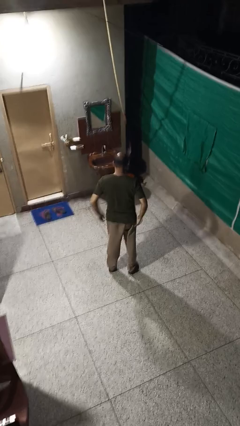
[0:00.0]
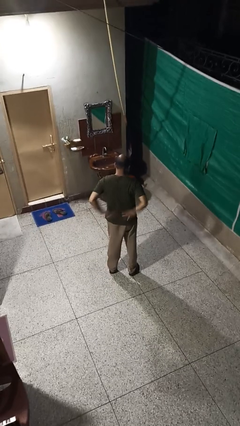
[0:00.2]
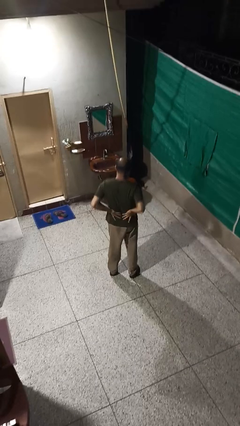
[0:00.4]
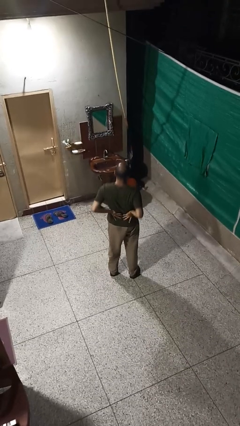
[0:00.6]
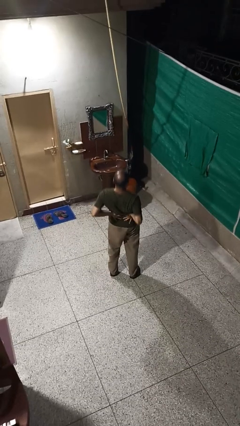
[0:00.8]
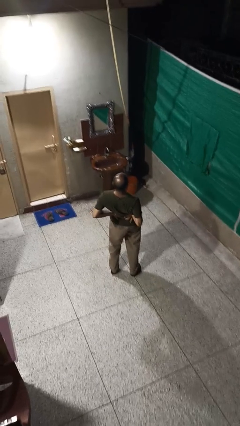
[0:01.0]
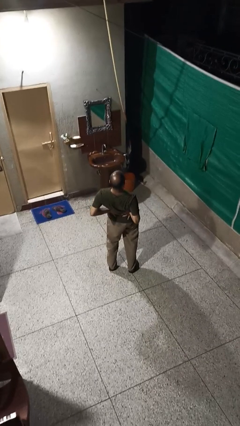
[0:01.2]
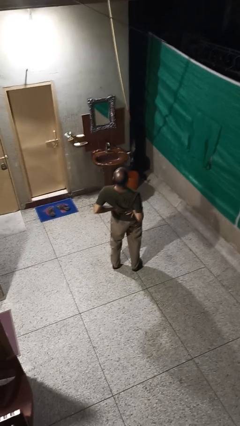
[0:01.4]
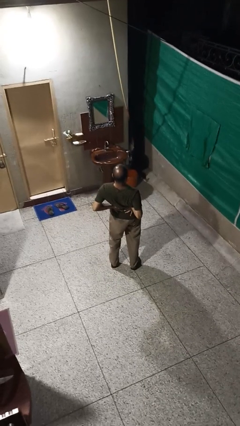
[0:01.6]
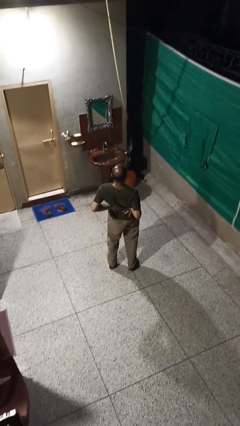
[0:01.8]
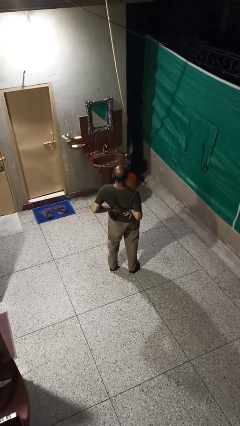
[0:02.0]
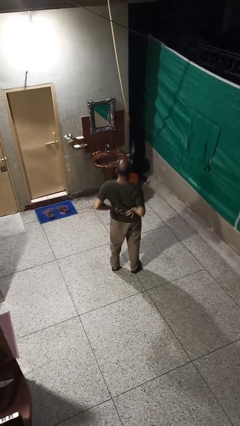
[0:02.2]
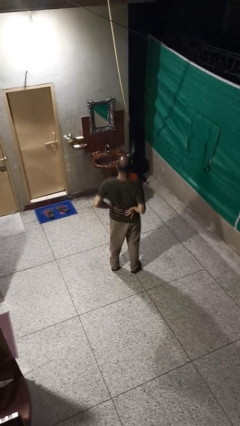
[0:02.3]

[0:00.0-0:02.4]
person stretches back

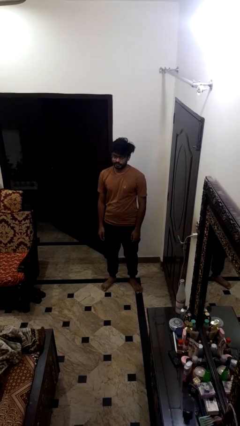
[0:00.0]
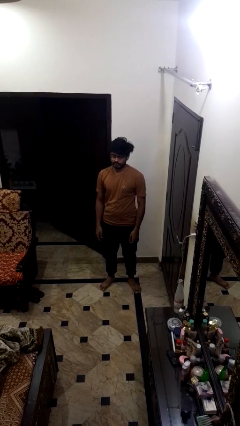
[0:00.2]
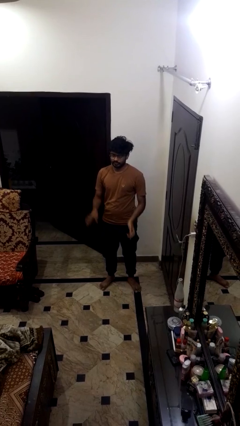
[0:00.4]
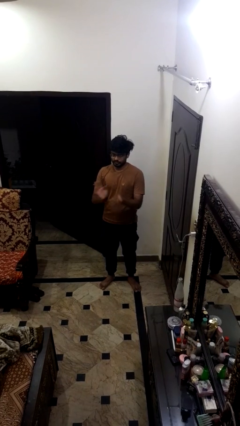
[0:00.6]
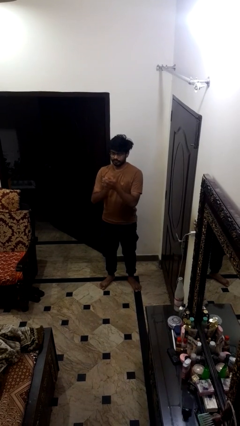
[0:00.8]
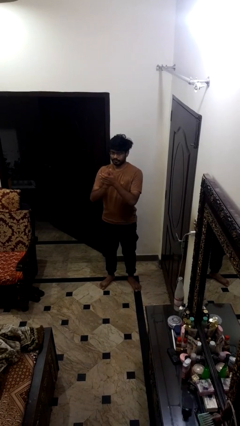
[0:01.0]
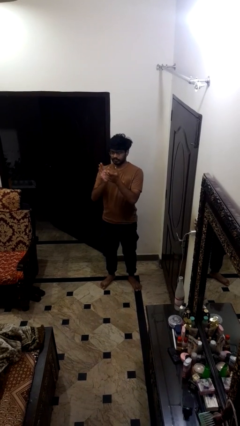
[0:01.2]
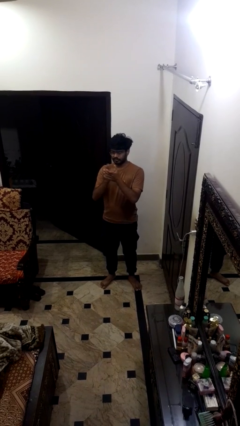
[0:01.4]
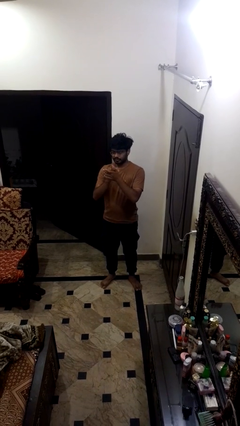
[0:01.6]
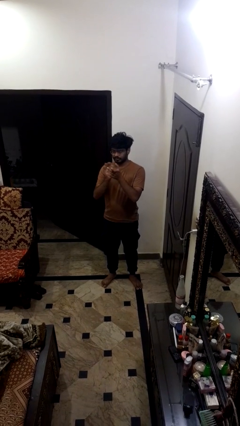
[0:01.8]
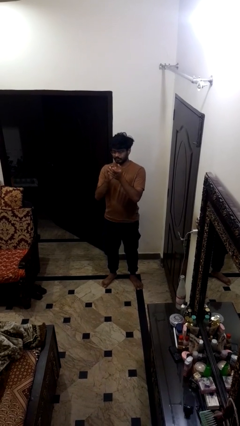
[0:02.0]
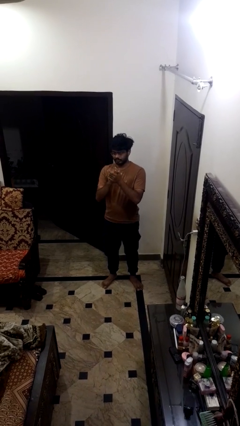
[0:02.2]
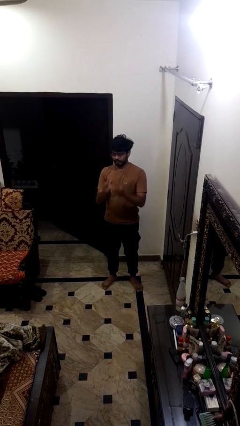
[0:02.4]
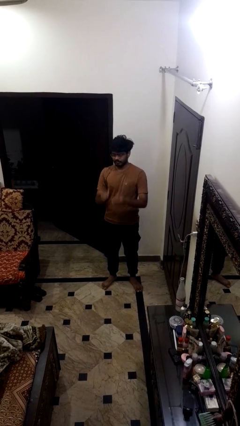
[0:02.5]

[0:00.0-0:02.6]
person claps hands

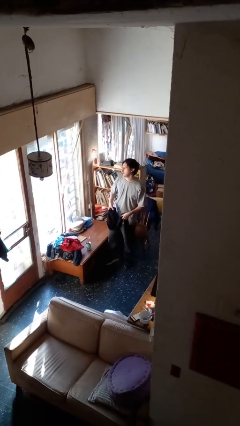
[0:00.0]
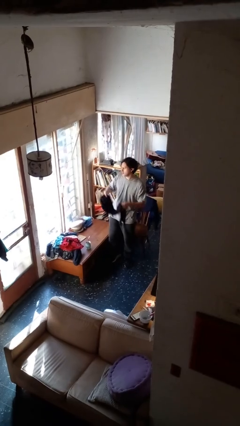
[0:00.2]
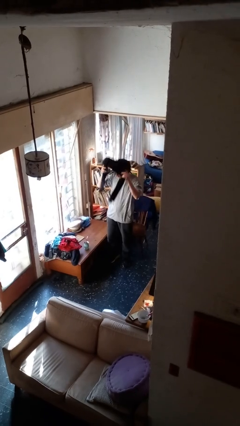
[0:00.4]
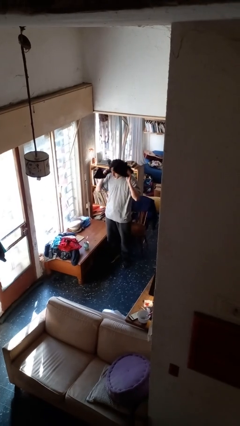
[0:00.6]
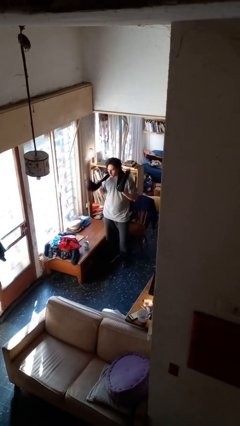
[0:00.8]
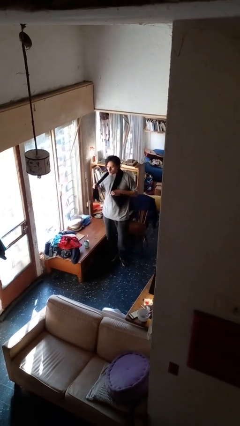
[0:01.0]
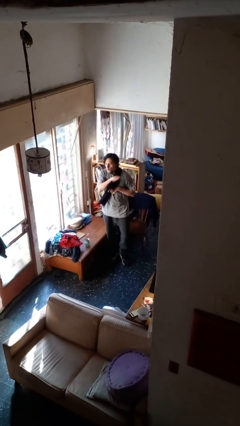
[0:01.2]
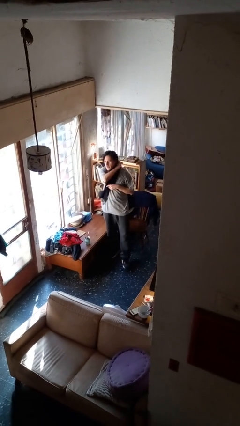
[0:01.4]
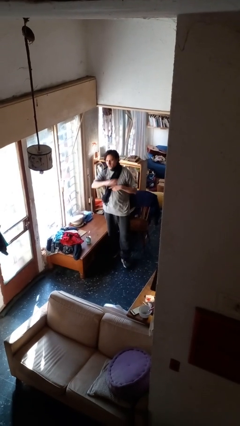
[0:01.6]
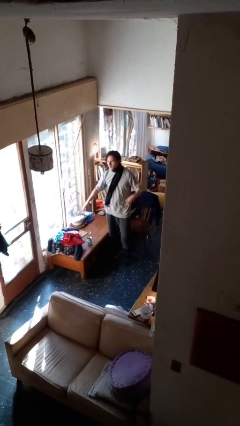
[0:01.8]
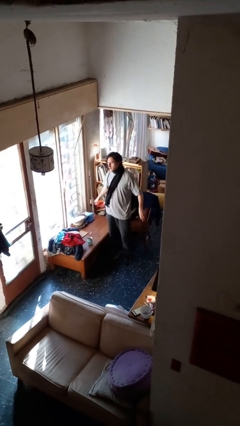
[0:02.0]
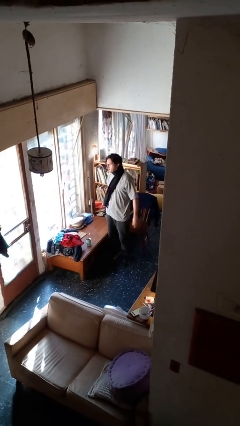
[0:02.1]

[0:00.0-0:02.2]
person puts on scarf

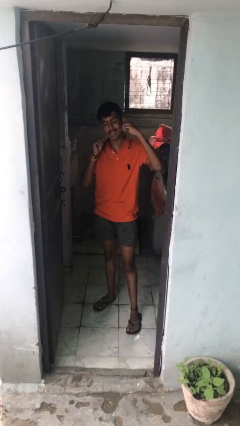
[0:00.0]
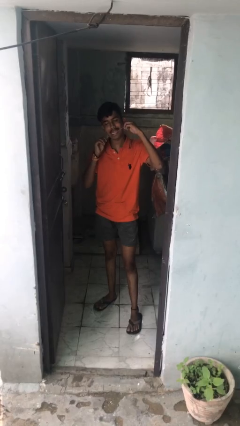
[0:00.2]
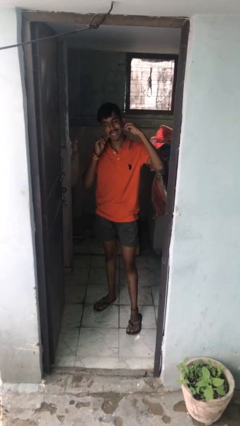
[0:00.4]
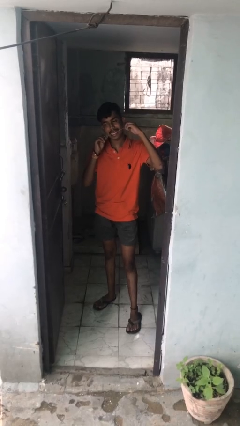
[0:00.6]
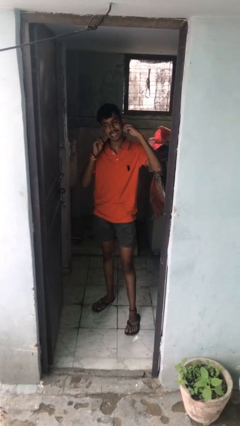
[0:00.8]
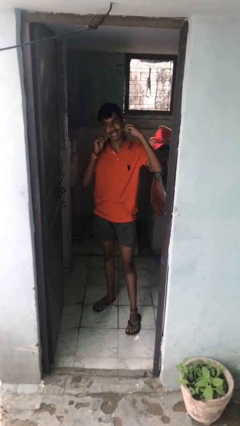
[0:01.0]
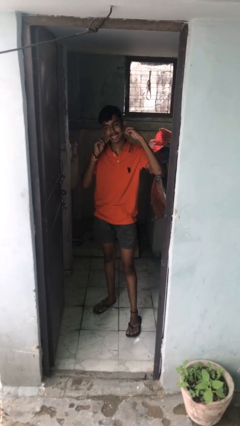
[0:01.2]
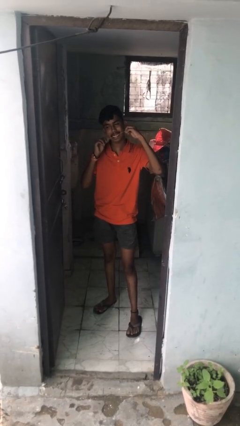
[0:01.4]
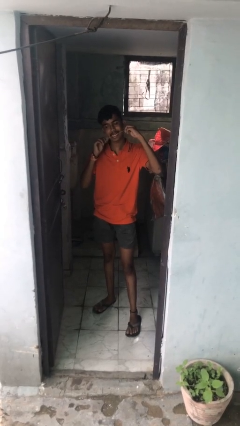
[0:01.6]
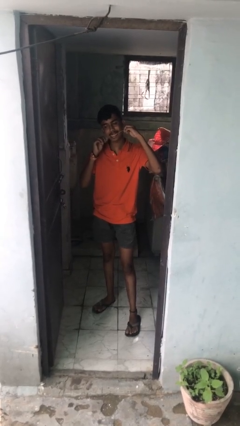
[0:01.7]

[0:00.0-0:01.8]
person flosses

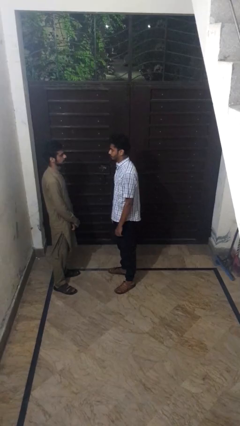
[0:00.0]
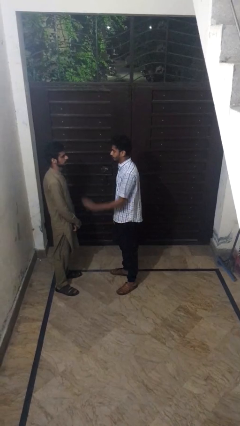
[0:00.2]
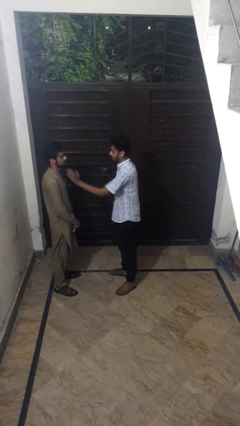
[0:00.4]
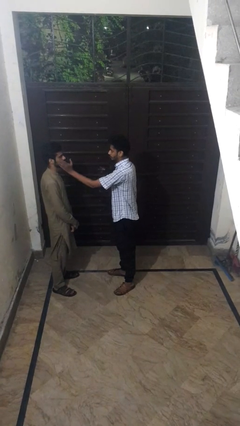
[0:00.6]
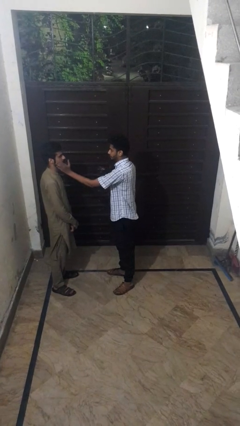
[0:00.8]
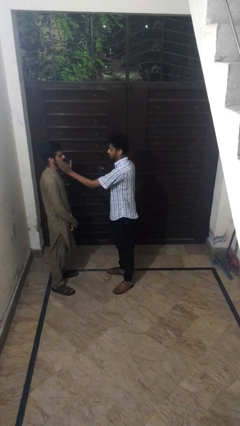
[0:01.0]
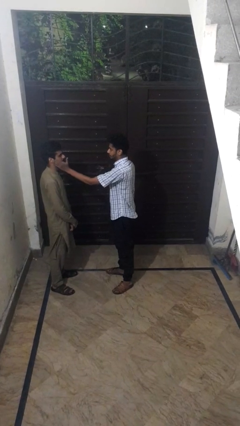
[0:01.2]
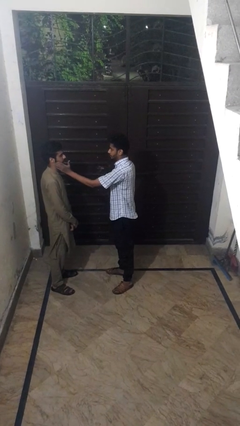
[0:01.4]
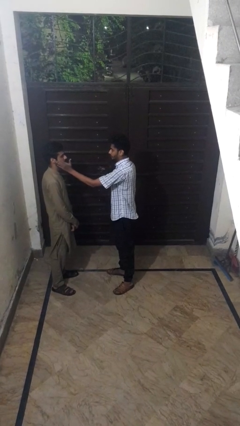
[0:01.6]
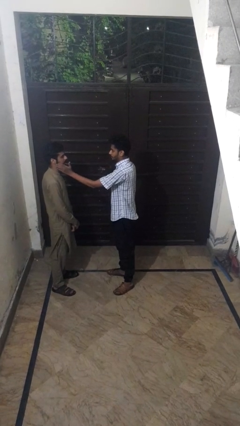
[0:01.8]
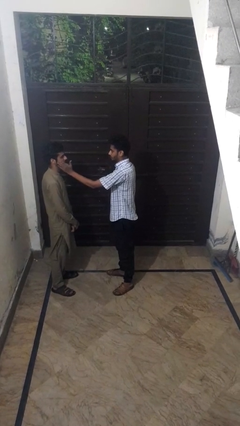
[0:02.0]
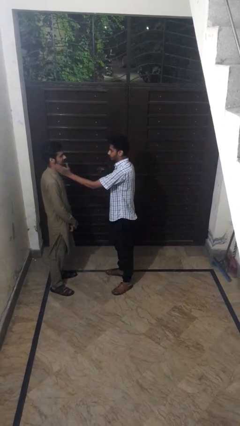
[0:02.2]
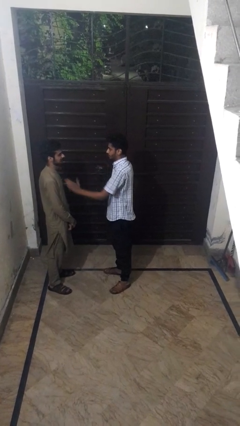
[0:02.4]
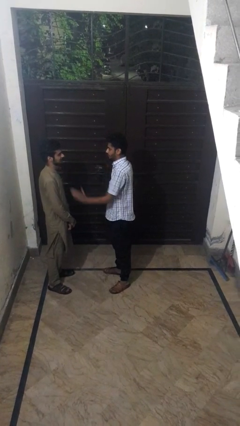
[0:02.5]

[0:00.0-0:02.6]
person touches face of person

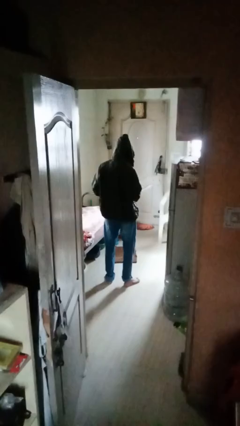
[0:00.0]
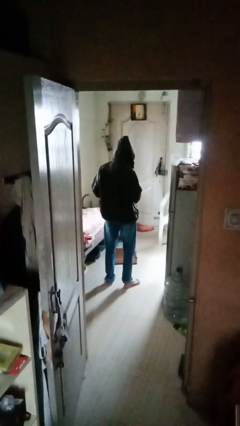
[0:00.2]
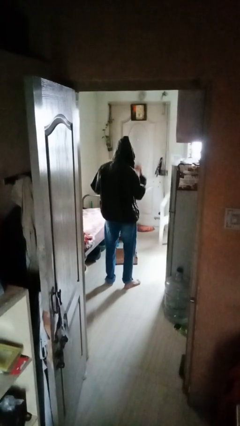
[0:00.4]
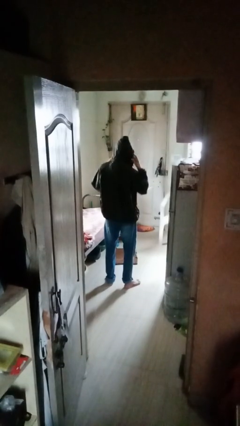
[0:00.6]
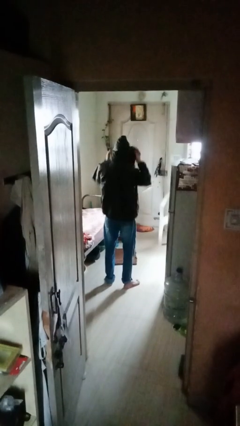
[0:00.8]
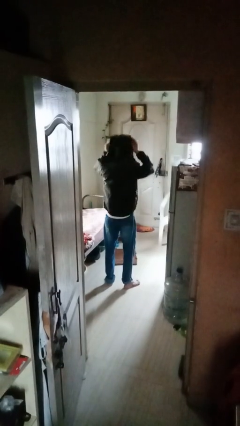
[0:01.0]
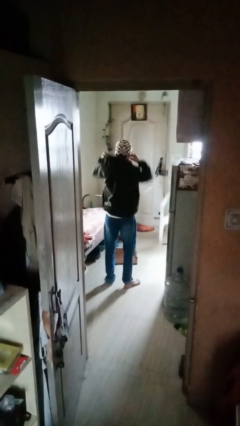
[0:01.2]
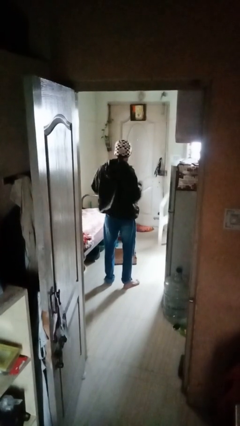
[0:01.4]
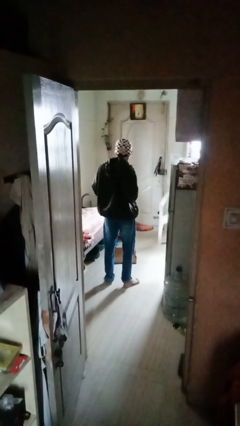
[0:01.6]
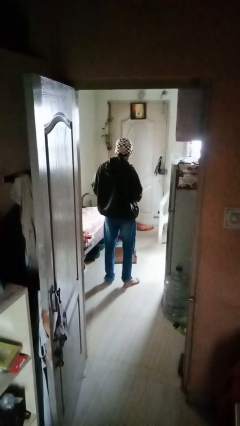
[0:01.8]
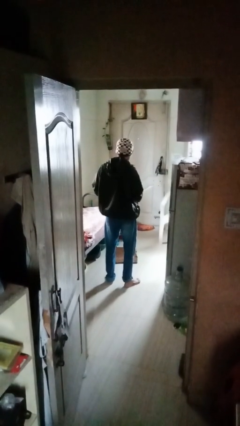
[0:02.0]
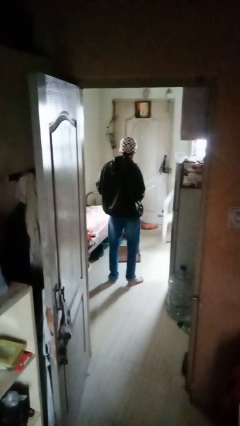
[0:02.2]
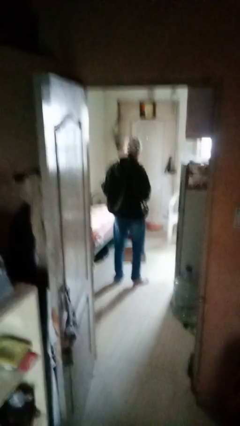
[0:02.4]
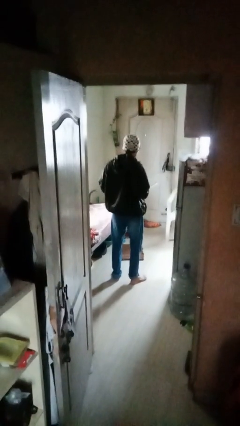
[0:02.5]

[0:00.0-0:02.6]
person takes off hoodie

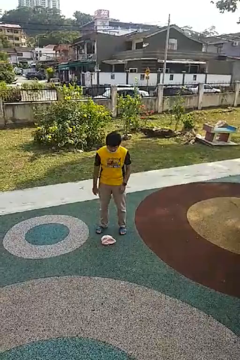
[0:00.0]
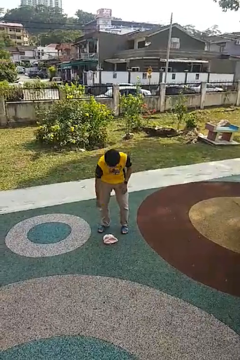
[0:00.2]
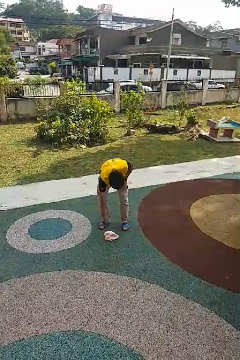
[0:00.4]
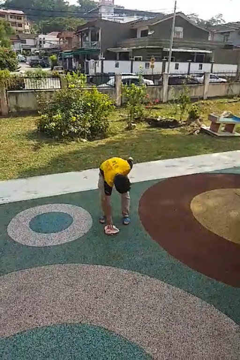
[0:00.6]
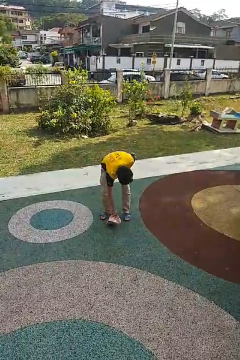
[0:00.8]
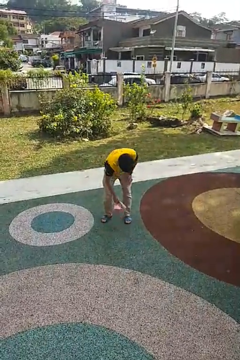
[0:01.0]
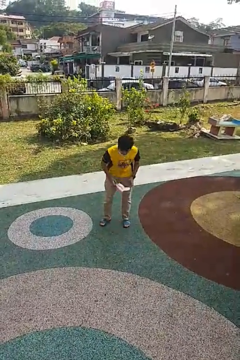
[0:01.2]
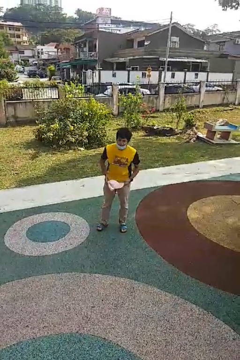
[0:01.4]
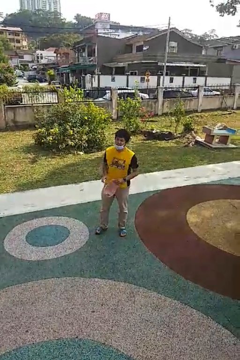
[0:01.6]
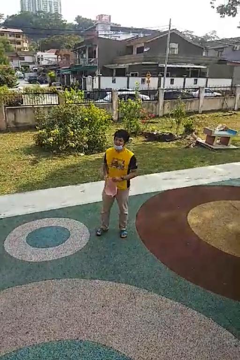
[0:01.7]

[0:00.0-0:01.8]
person picks up object from floor

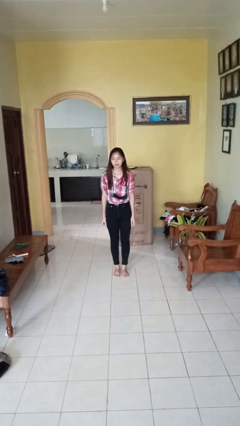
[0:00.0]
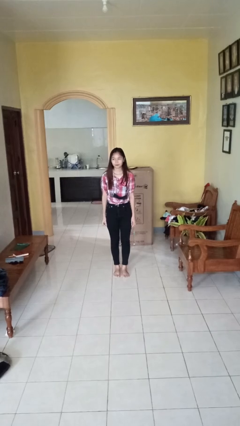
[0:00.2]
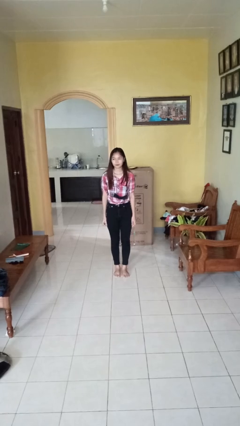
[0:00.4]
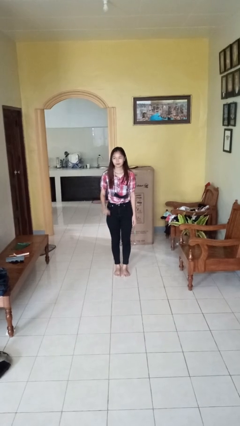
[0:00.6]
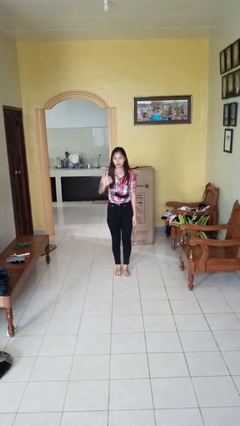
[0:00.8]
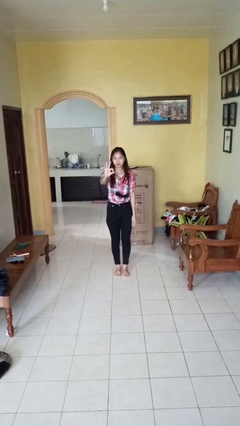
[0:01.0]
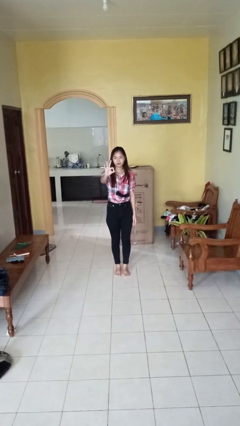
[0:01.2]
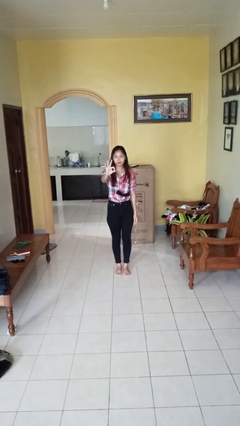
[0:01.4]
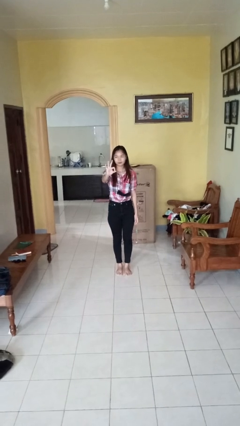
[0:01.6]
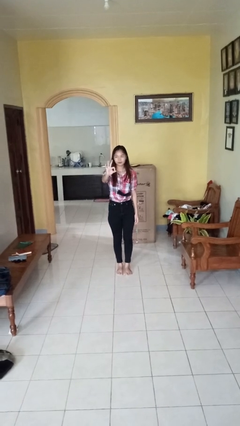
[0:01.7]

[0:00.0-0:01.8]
person gestures number three
